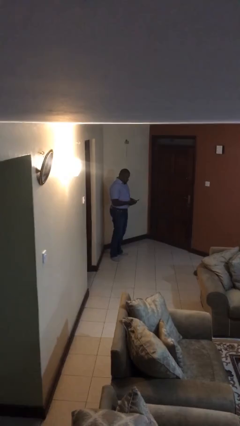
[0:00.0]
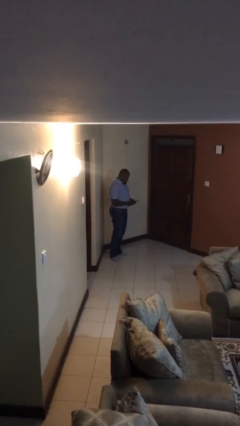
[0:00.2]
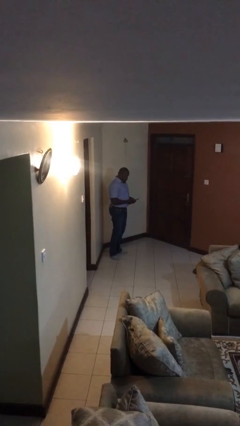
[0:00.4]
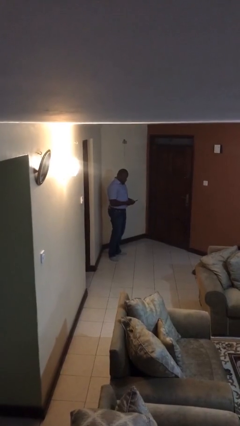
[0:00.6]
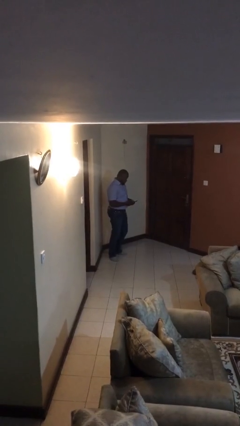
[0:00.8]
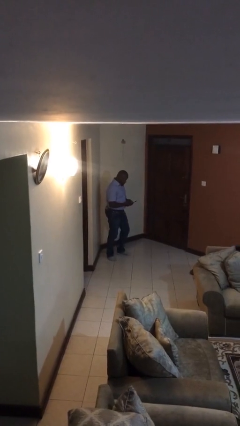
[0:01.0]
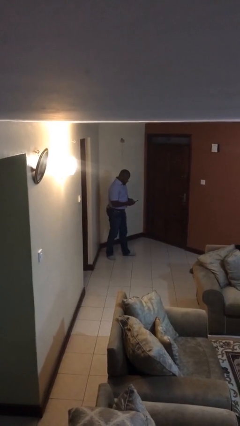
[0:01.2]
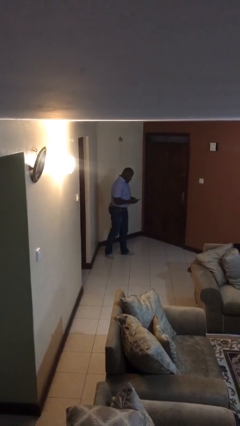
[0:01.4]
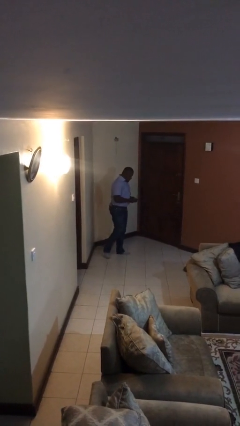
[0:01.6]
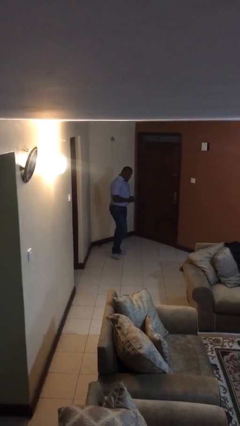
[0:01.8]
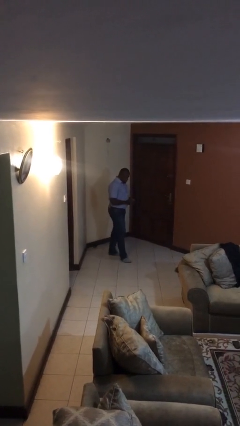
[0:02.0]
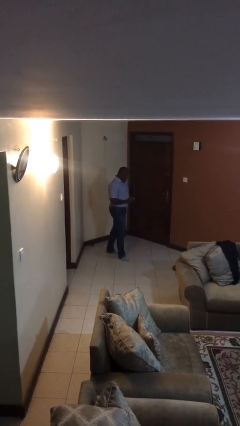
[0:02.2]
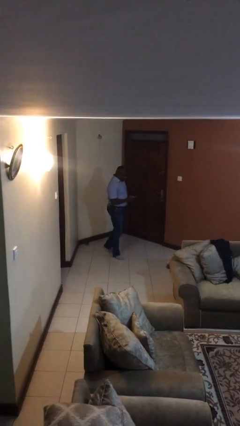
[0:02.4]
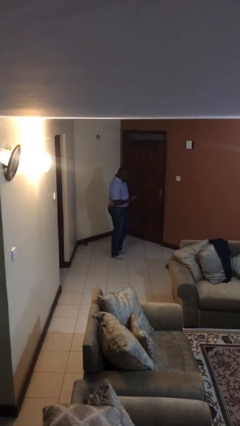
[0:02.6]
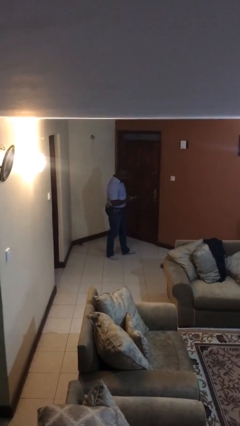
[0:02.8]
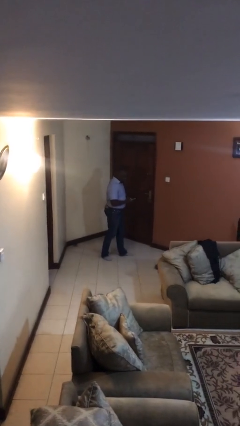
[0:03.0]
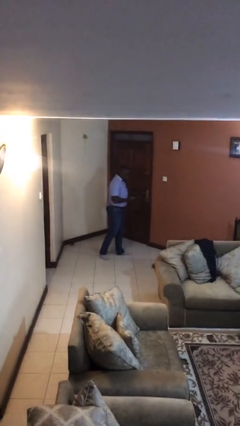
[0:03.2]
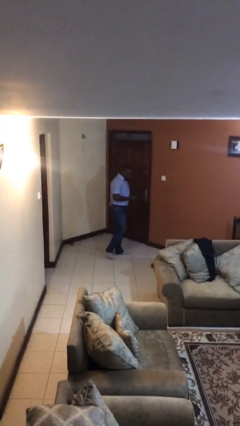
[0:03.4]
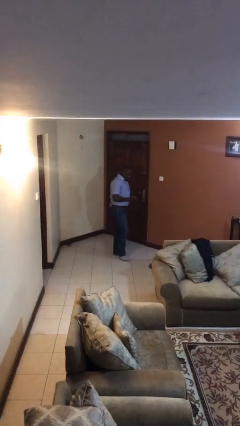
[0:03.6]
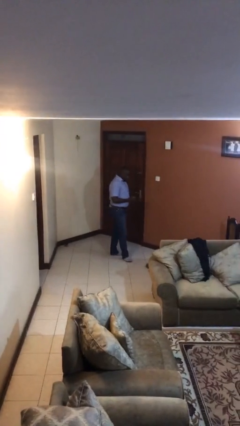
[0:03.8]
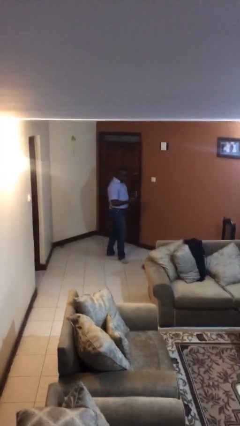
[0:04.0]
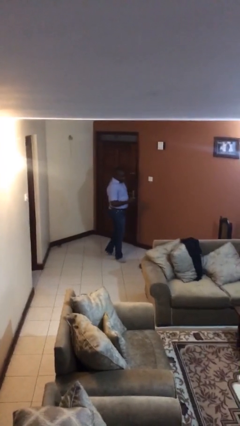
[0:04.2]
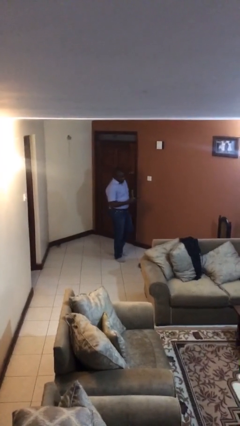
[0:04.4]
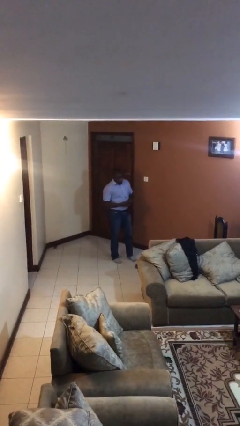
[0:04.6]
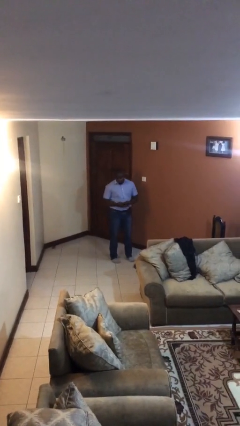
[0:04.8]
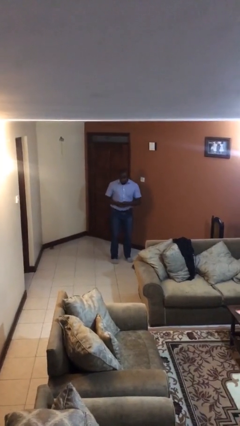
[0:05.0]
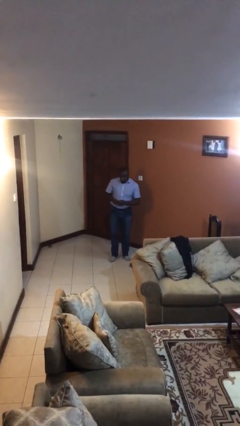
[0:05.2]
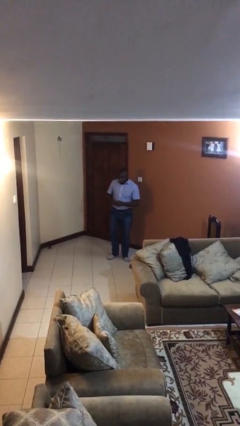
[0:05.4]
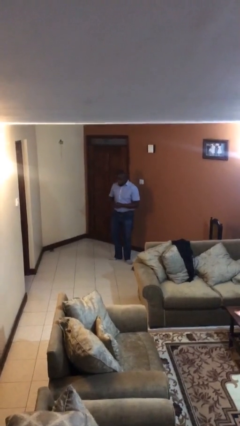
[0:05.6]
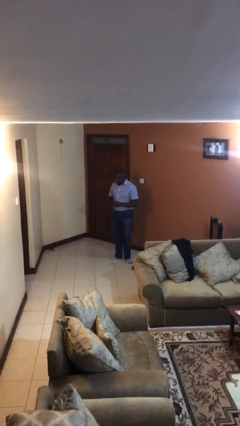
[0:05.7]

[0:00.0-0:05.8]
person texts on phone

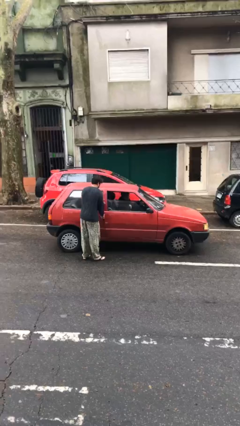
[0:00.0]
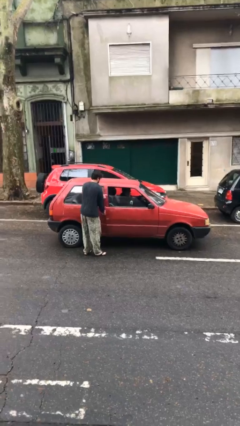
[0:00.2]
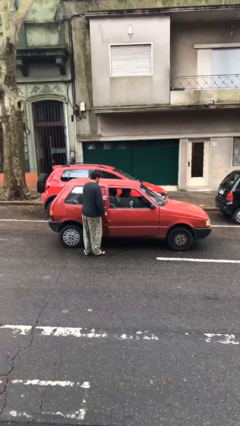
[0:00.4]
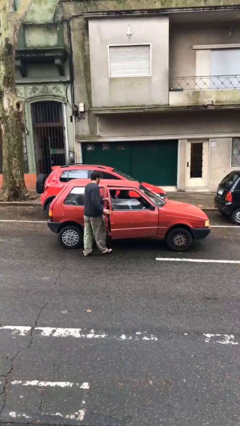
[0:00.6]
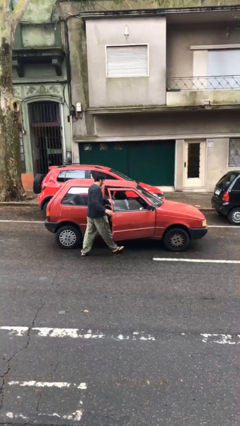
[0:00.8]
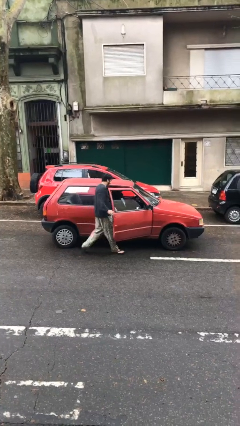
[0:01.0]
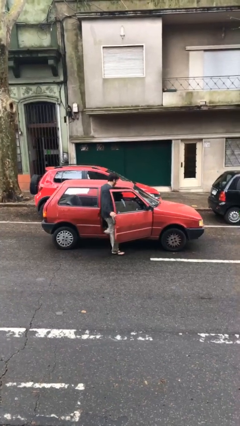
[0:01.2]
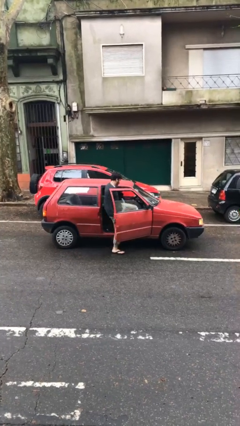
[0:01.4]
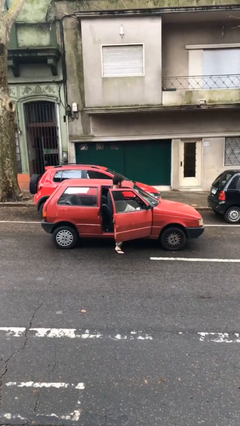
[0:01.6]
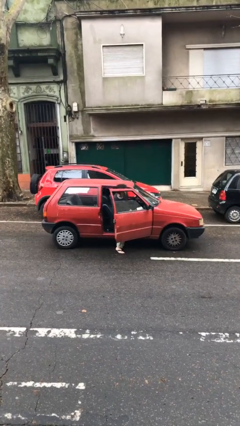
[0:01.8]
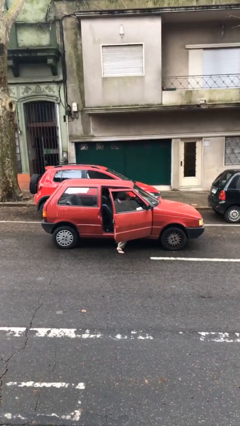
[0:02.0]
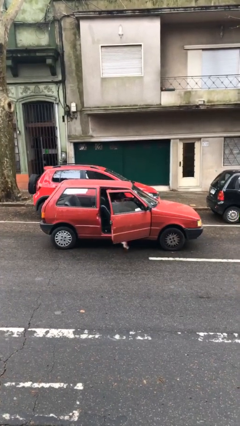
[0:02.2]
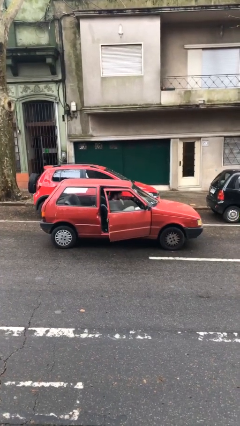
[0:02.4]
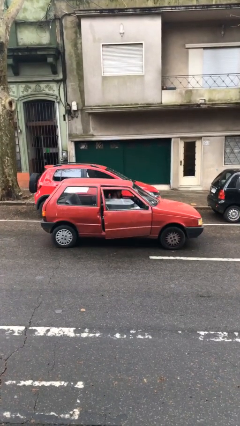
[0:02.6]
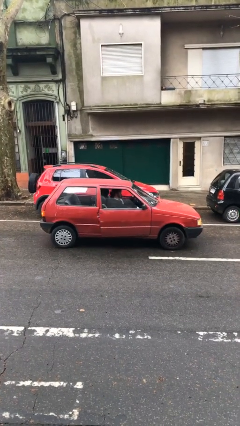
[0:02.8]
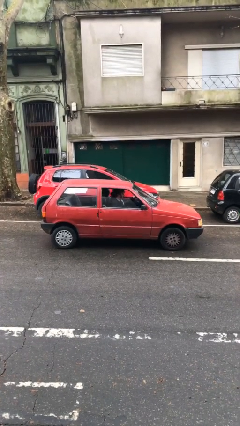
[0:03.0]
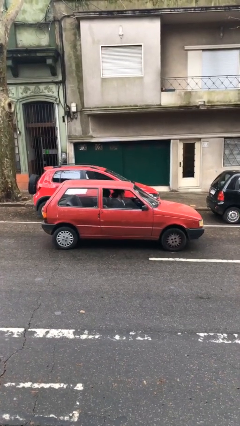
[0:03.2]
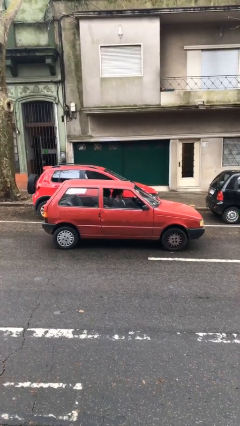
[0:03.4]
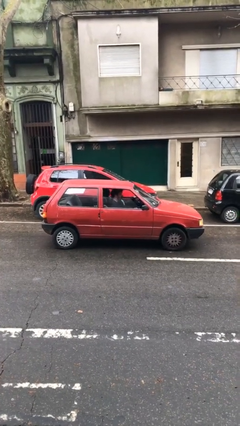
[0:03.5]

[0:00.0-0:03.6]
car picks up person

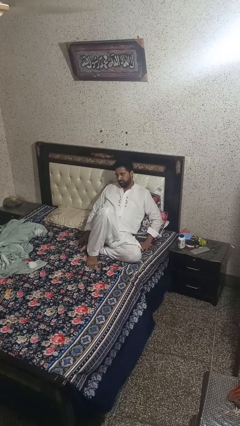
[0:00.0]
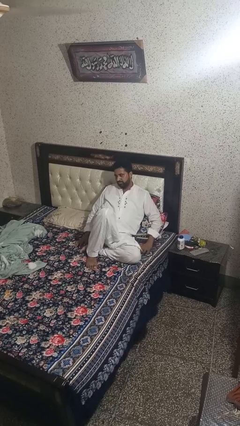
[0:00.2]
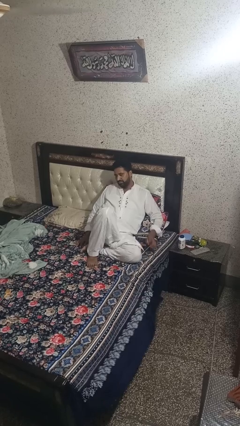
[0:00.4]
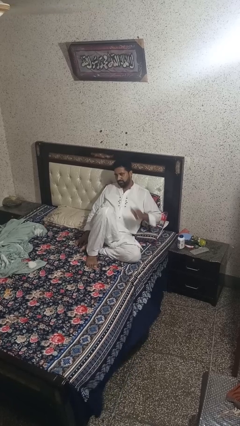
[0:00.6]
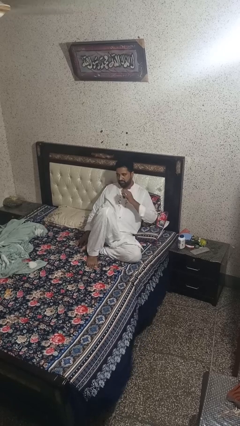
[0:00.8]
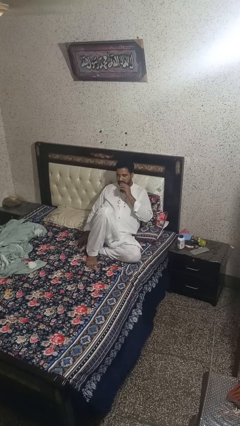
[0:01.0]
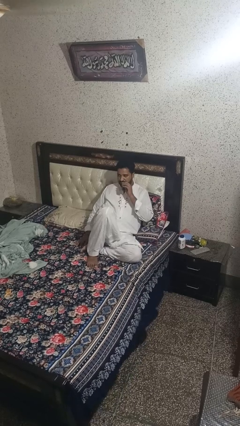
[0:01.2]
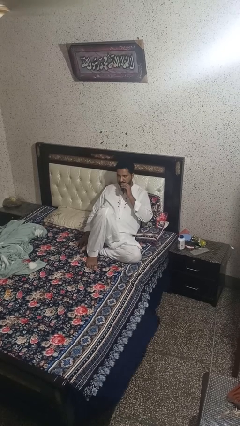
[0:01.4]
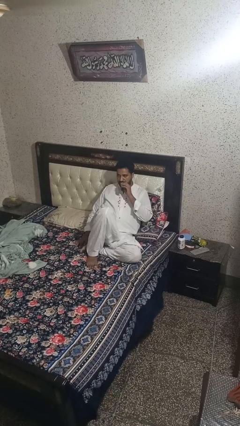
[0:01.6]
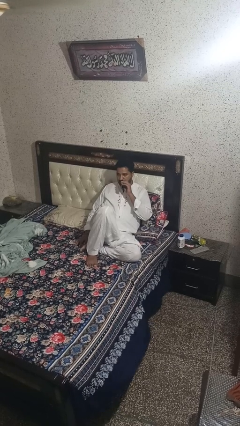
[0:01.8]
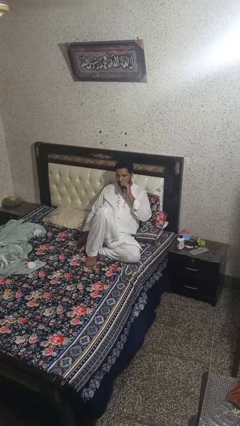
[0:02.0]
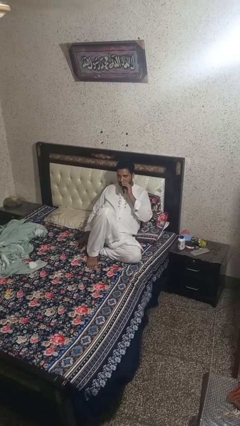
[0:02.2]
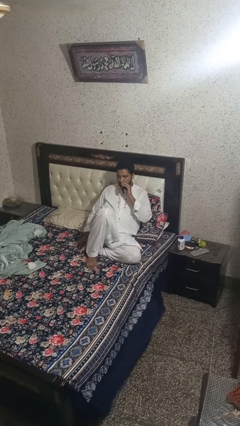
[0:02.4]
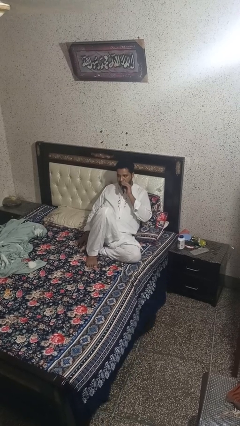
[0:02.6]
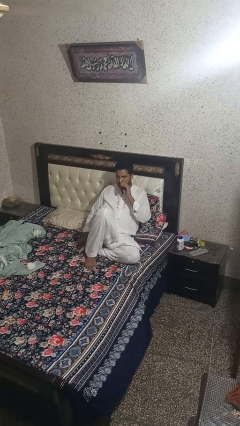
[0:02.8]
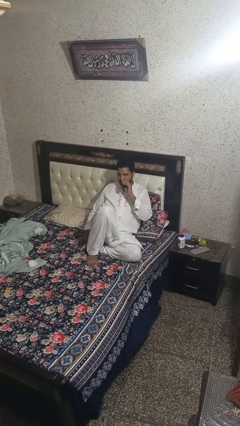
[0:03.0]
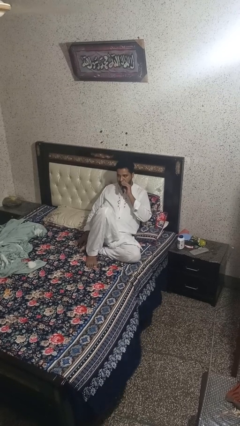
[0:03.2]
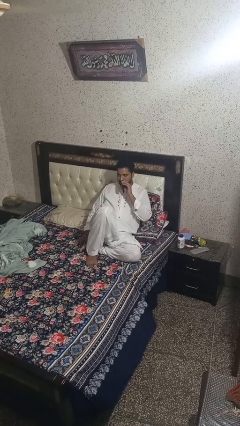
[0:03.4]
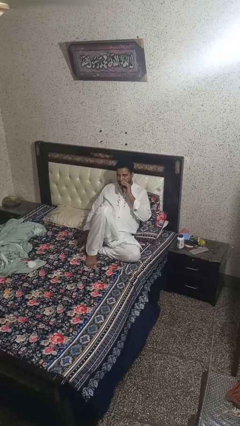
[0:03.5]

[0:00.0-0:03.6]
person vapes

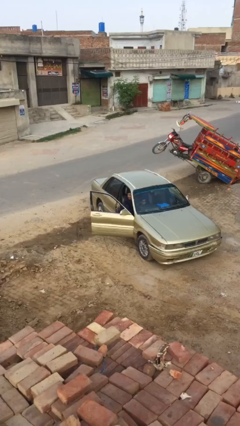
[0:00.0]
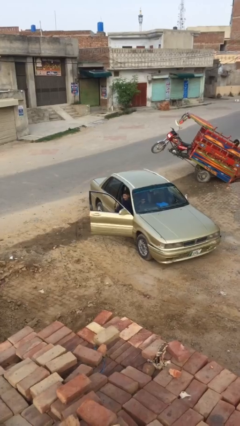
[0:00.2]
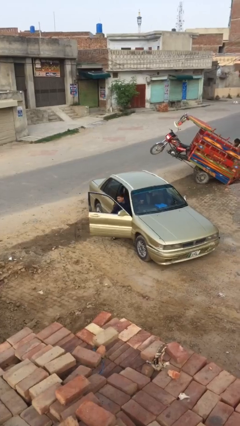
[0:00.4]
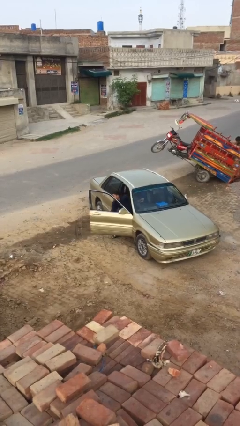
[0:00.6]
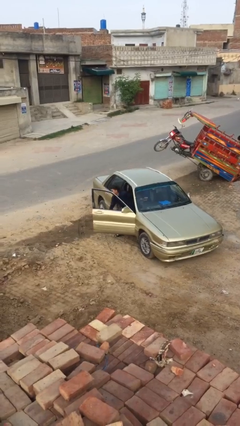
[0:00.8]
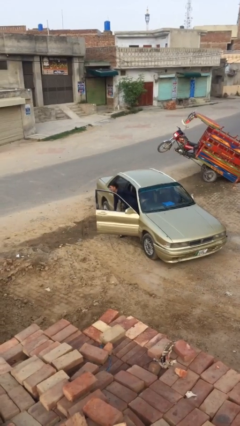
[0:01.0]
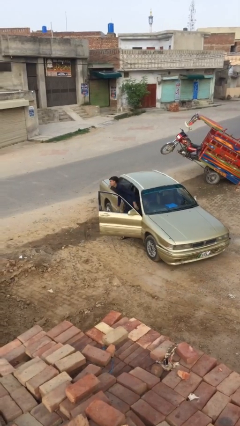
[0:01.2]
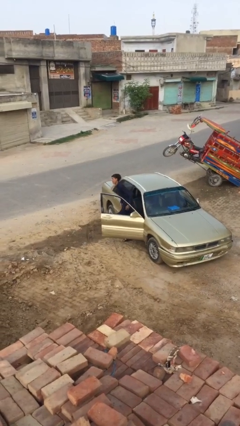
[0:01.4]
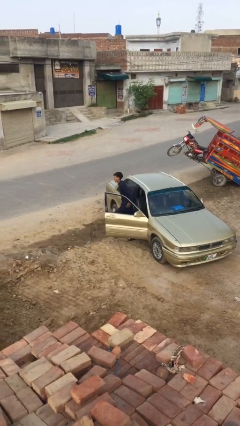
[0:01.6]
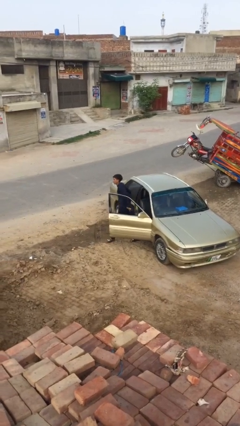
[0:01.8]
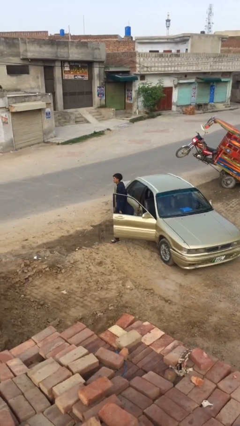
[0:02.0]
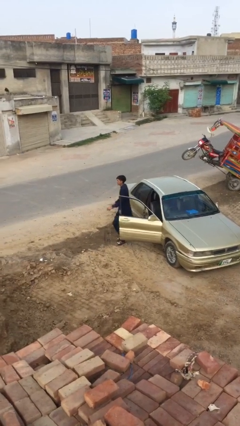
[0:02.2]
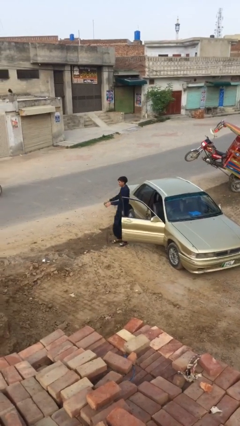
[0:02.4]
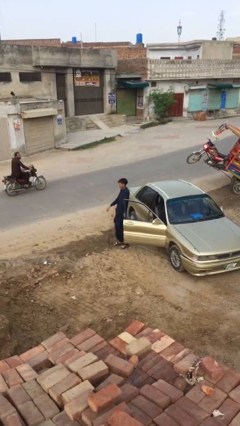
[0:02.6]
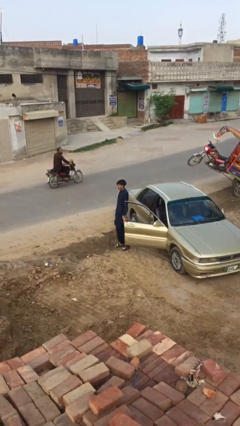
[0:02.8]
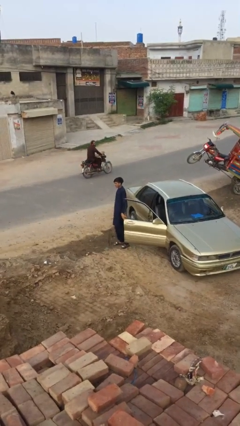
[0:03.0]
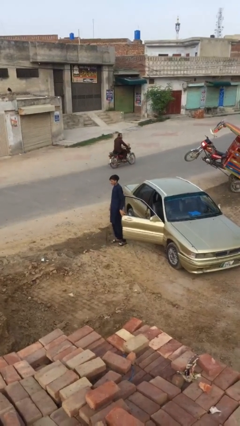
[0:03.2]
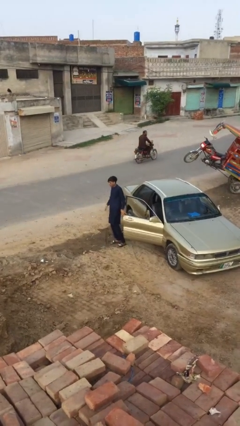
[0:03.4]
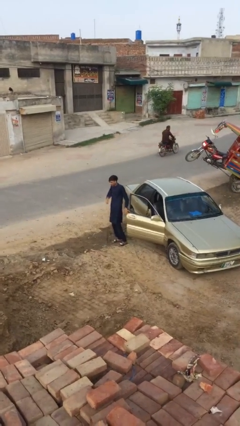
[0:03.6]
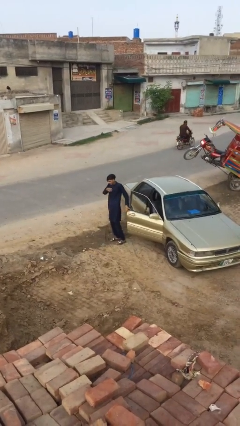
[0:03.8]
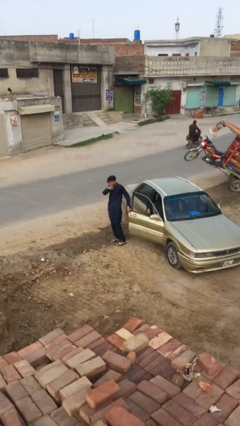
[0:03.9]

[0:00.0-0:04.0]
person exits car

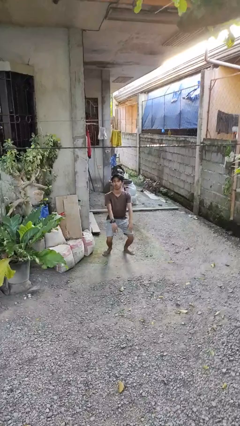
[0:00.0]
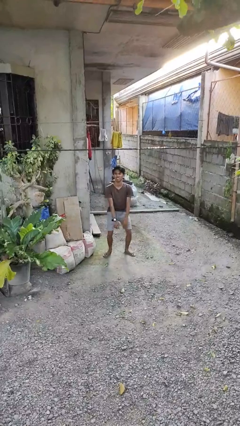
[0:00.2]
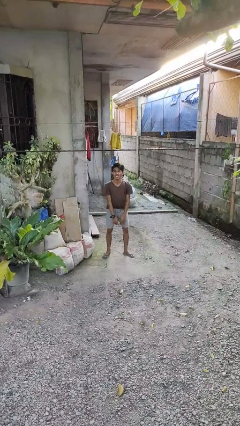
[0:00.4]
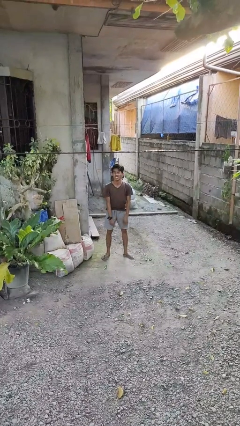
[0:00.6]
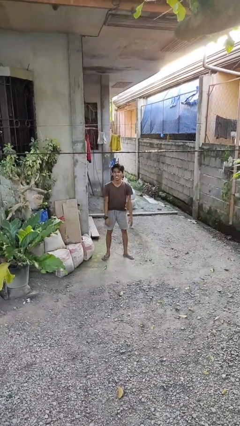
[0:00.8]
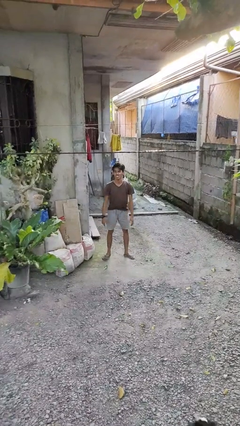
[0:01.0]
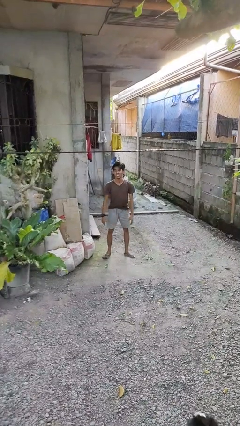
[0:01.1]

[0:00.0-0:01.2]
person stands up
